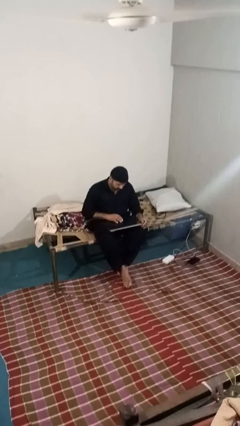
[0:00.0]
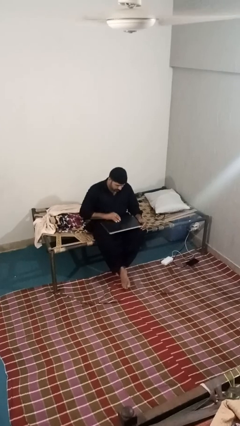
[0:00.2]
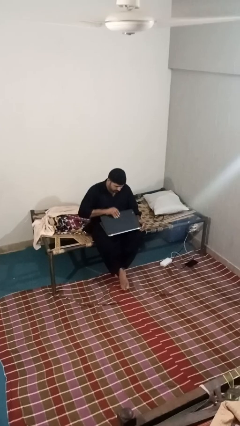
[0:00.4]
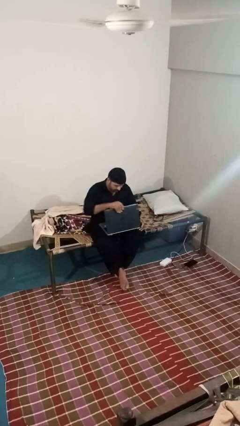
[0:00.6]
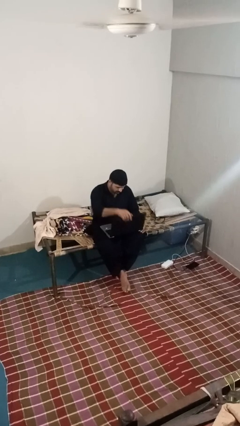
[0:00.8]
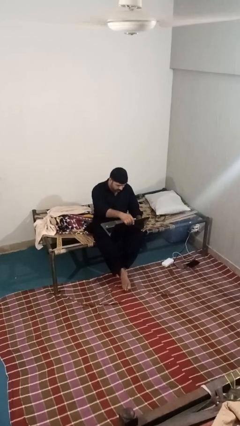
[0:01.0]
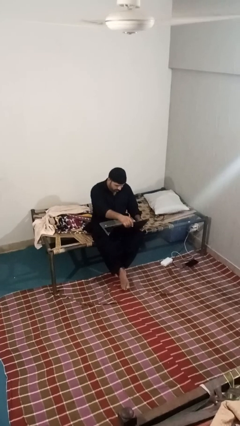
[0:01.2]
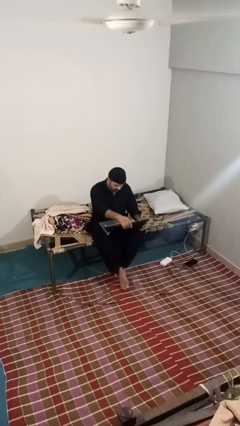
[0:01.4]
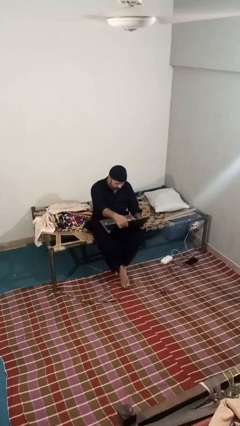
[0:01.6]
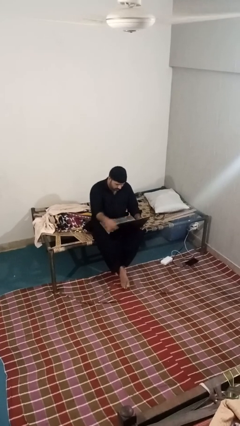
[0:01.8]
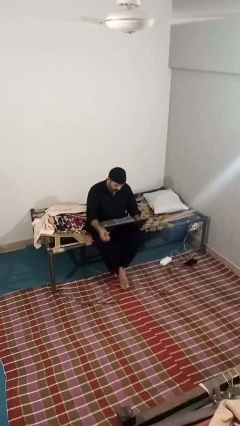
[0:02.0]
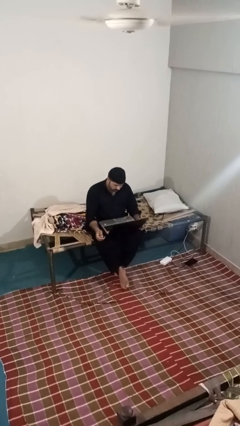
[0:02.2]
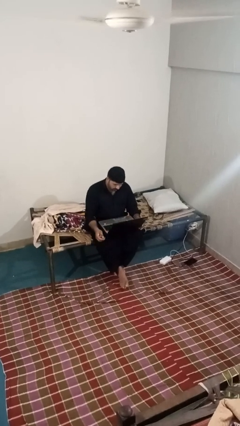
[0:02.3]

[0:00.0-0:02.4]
person opens laptop

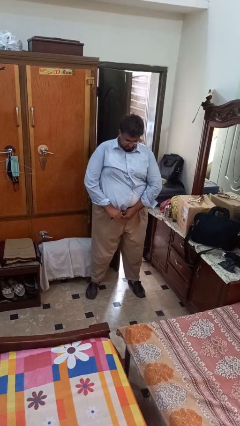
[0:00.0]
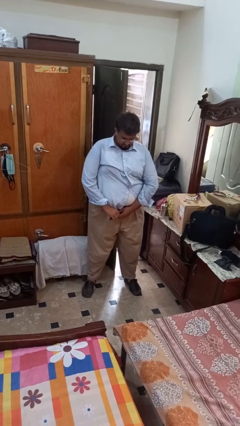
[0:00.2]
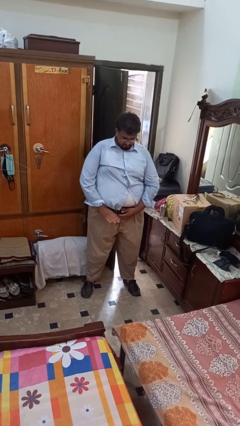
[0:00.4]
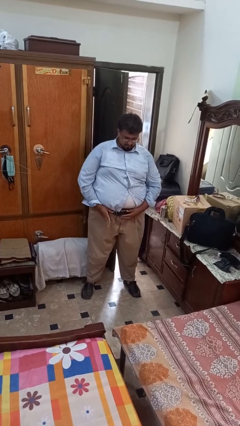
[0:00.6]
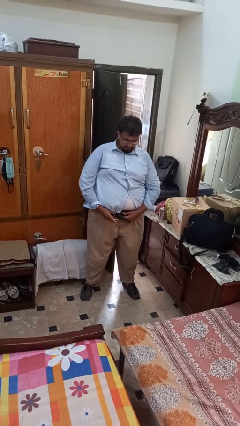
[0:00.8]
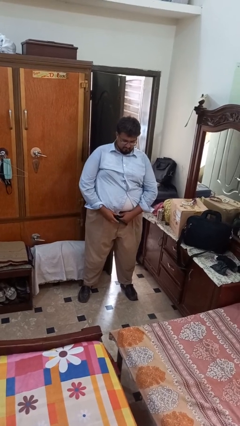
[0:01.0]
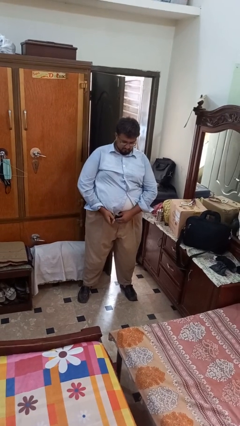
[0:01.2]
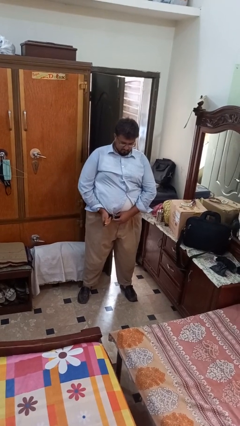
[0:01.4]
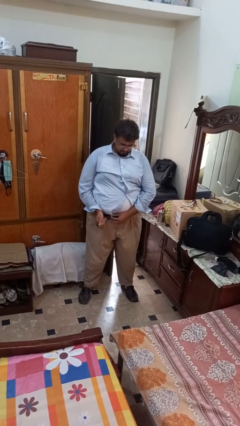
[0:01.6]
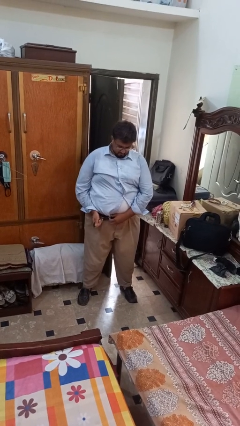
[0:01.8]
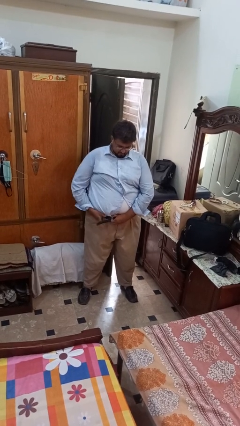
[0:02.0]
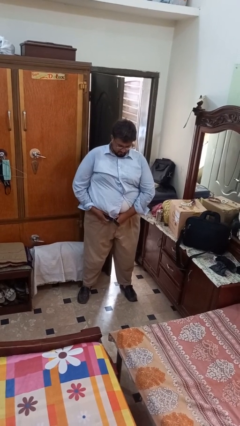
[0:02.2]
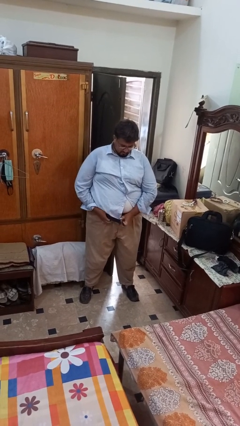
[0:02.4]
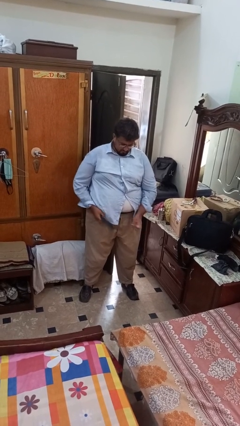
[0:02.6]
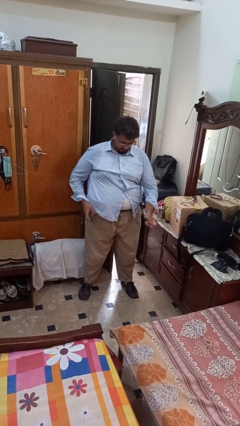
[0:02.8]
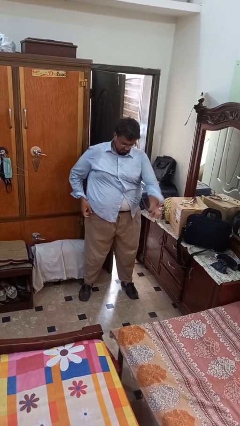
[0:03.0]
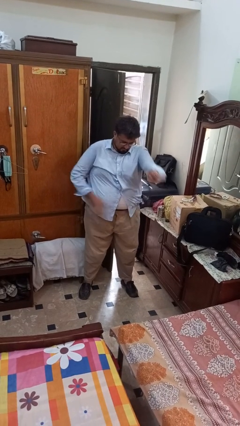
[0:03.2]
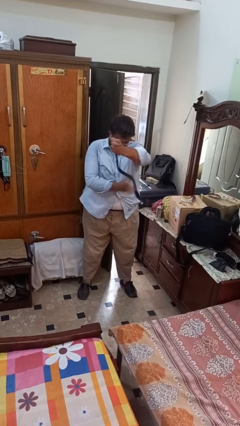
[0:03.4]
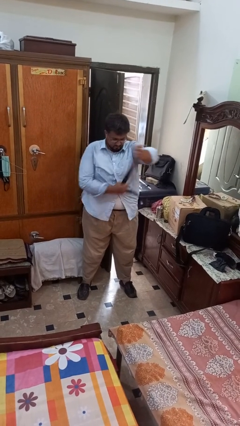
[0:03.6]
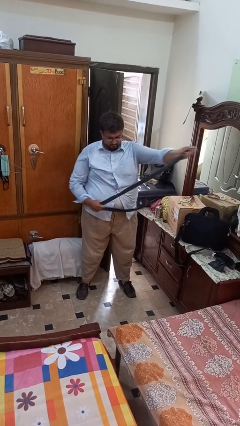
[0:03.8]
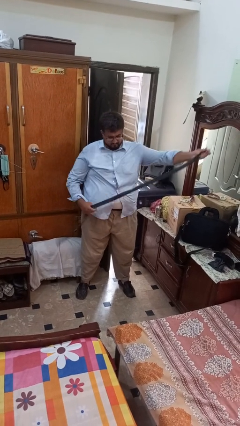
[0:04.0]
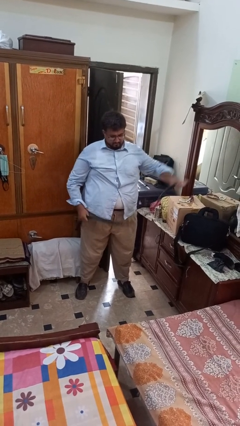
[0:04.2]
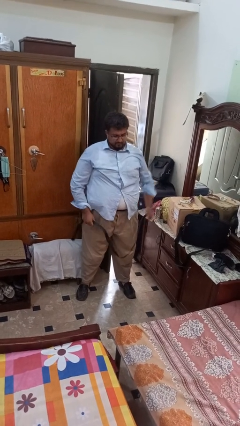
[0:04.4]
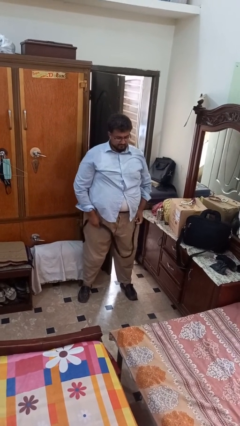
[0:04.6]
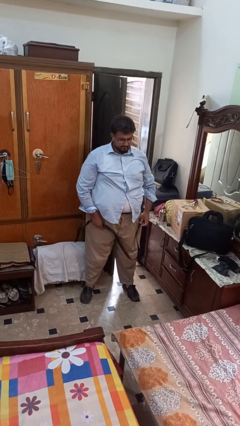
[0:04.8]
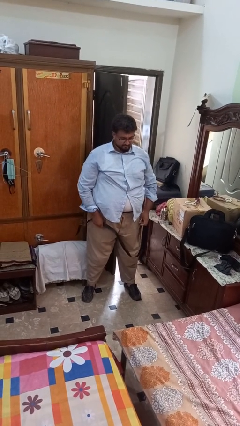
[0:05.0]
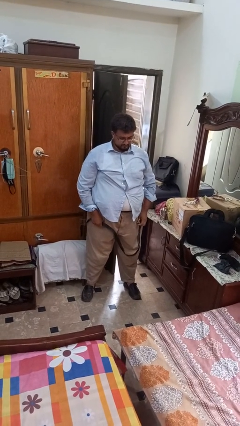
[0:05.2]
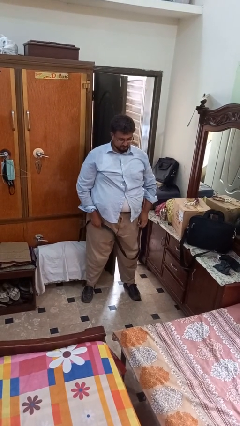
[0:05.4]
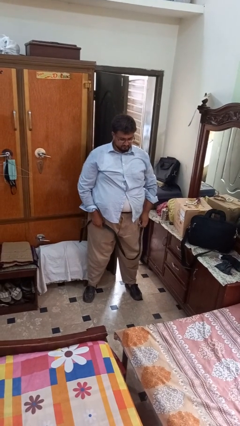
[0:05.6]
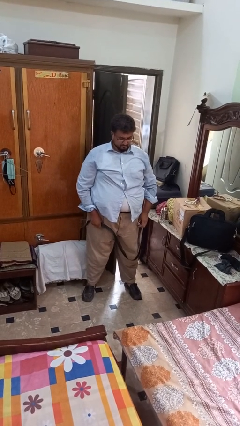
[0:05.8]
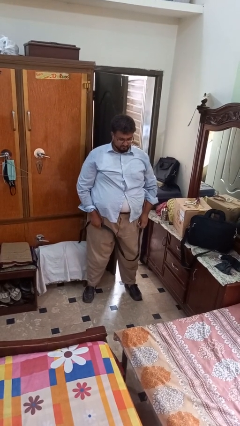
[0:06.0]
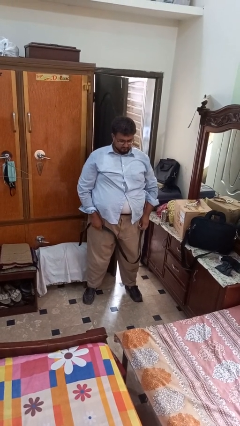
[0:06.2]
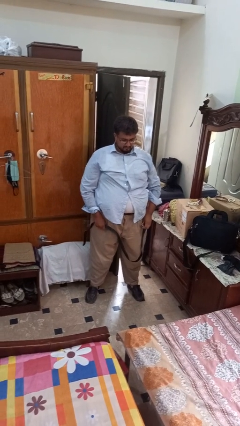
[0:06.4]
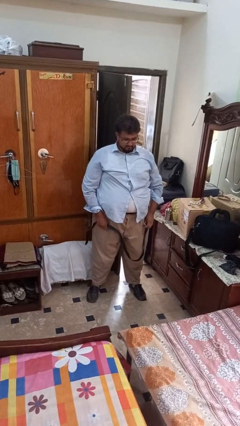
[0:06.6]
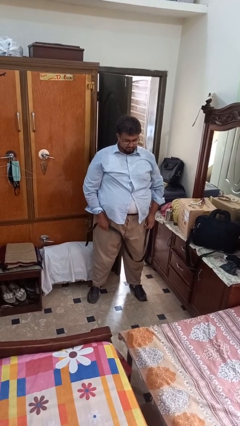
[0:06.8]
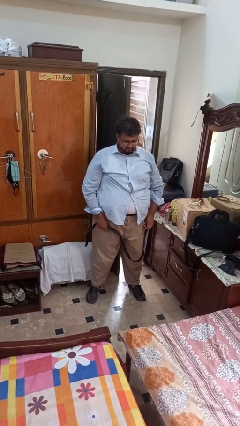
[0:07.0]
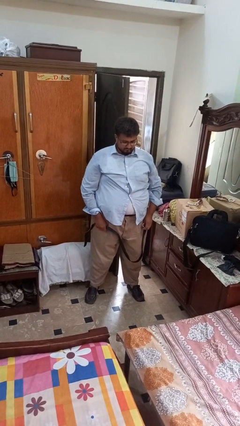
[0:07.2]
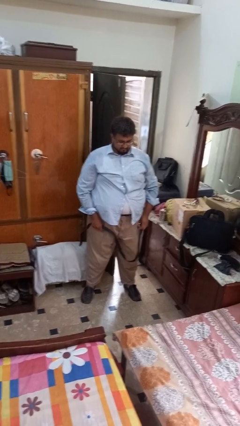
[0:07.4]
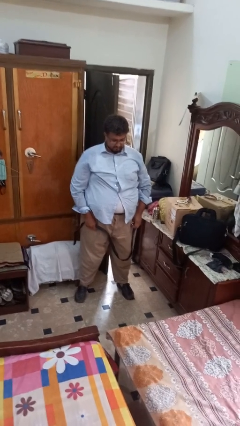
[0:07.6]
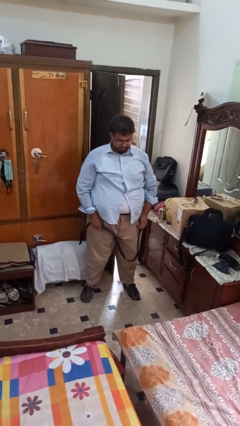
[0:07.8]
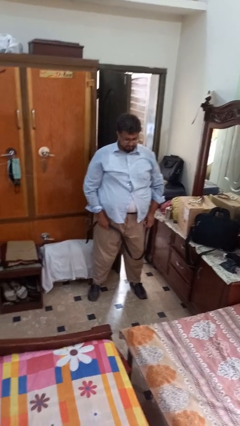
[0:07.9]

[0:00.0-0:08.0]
person takes off belt

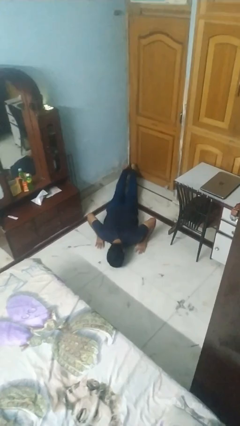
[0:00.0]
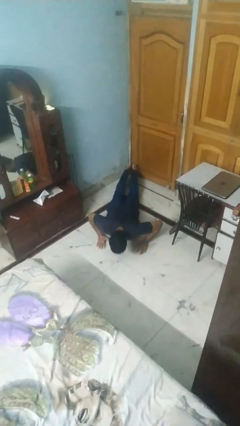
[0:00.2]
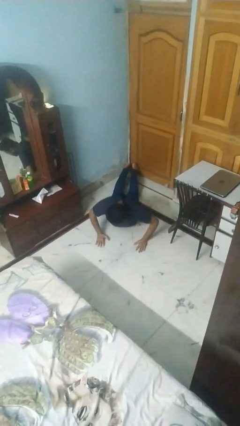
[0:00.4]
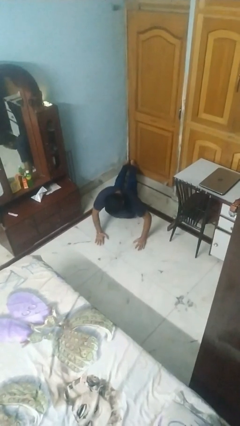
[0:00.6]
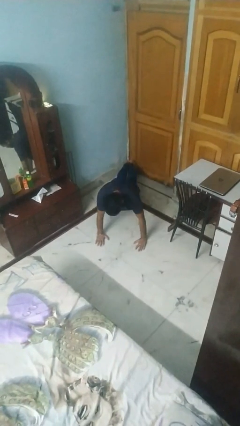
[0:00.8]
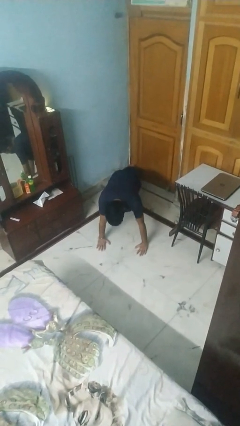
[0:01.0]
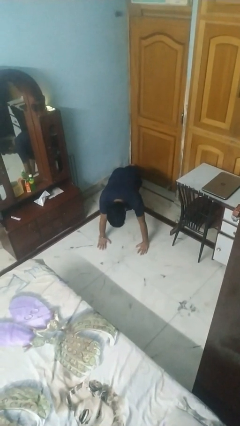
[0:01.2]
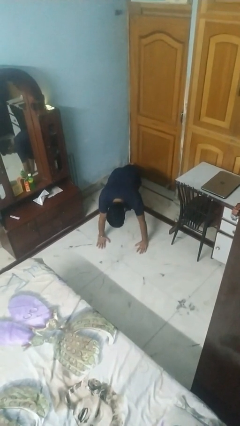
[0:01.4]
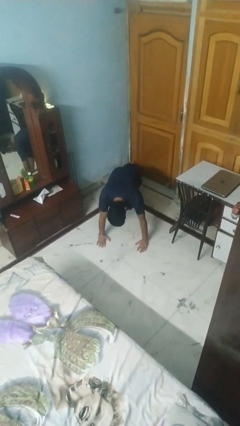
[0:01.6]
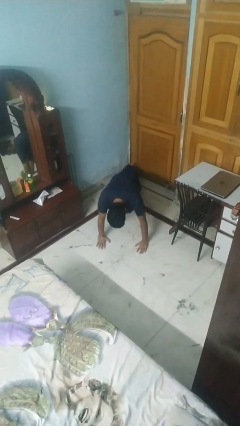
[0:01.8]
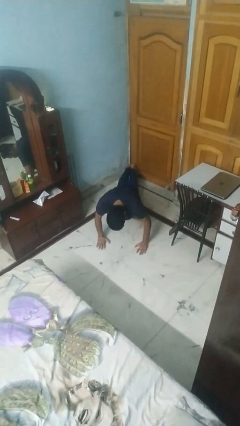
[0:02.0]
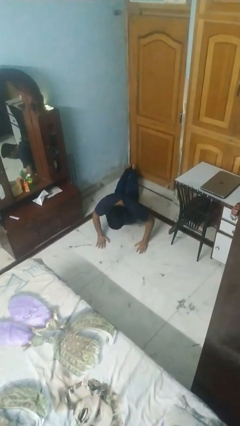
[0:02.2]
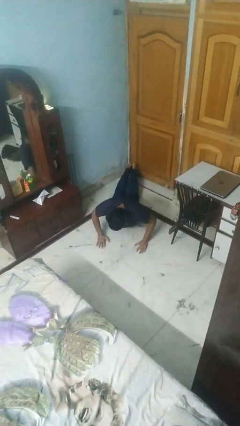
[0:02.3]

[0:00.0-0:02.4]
person exercises with pushup

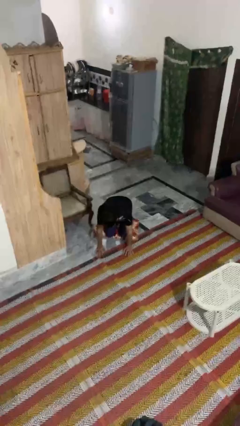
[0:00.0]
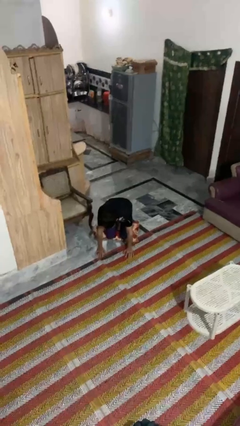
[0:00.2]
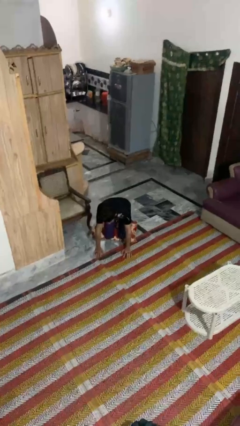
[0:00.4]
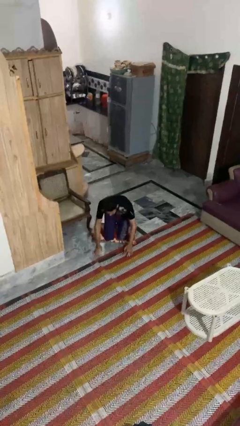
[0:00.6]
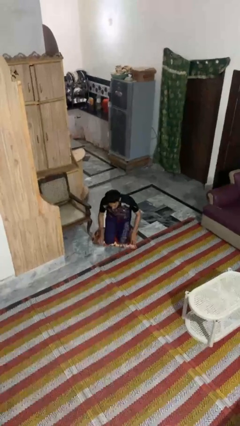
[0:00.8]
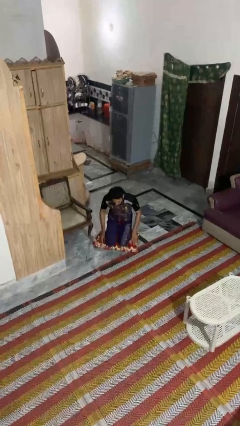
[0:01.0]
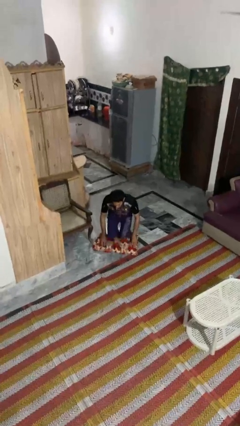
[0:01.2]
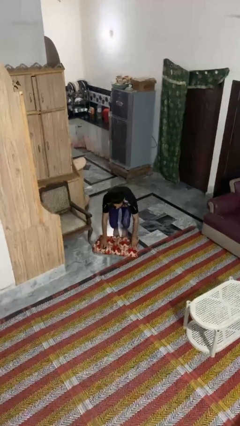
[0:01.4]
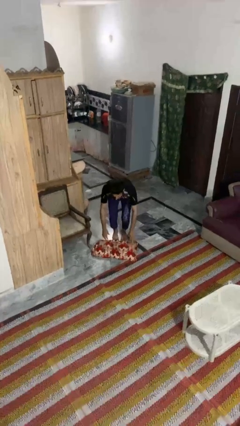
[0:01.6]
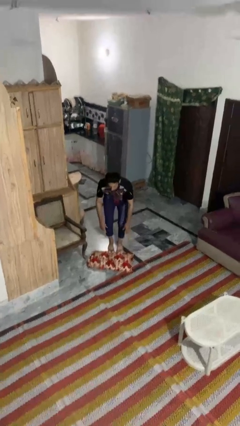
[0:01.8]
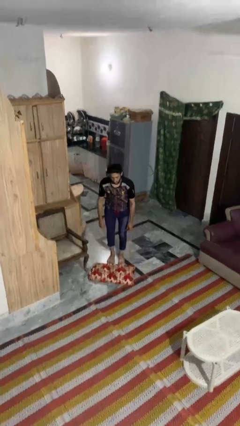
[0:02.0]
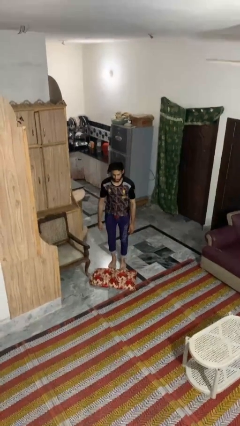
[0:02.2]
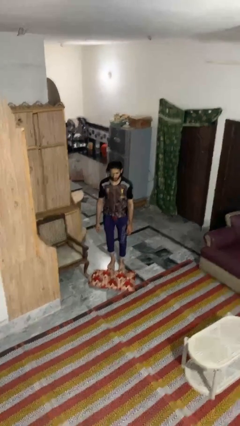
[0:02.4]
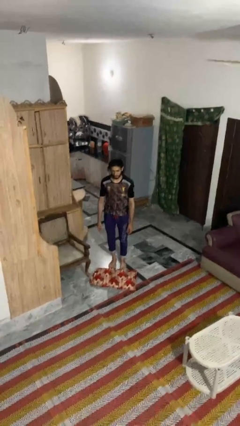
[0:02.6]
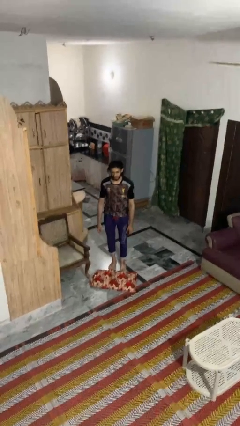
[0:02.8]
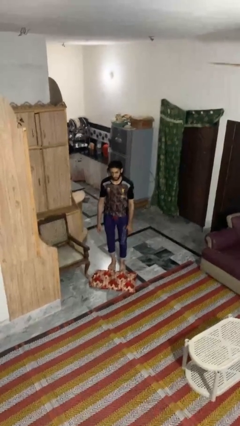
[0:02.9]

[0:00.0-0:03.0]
person stands up from floor

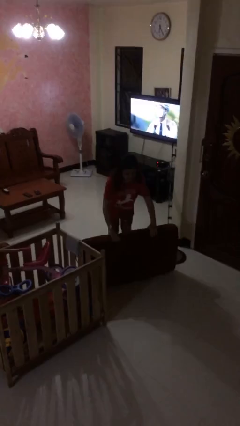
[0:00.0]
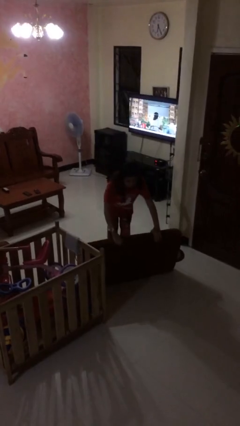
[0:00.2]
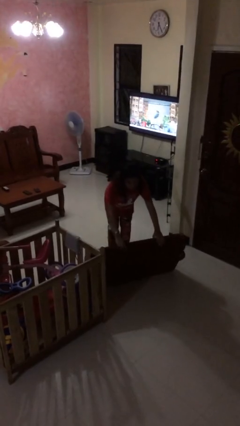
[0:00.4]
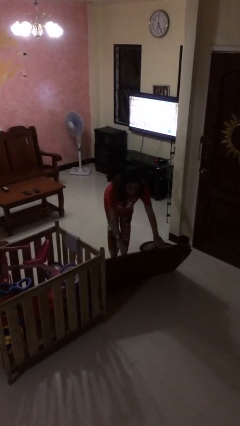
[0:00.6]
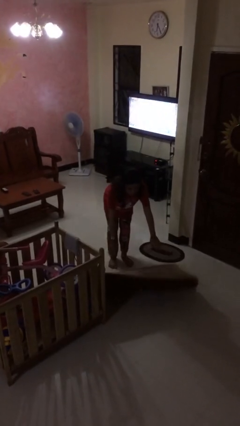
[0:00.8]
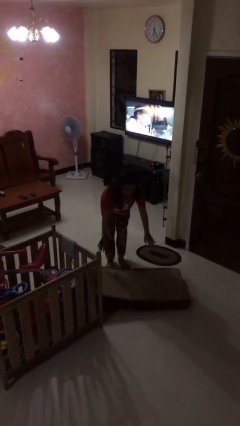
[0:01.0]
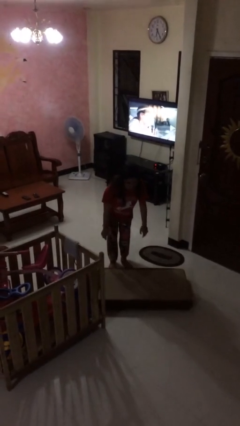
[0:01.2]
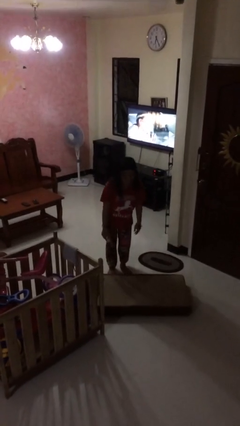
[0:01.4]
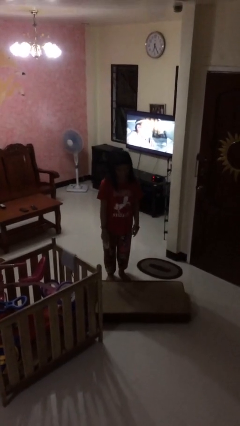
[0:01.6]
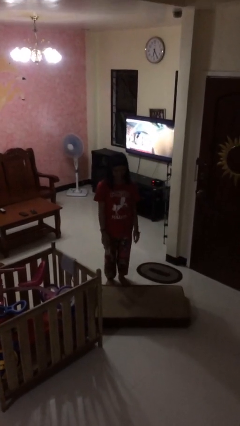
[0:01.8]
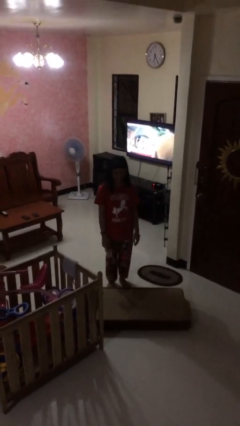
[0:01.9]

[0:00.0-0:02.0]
person puts down object on floor
